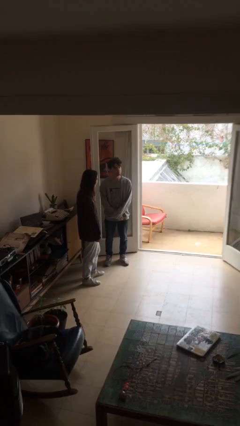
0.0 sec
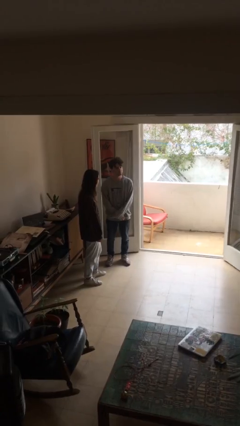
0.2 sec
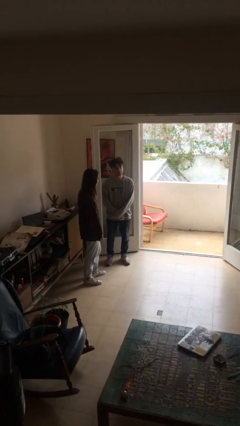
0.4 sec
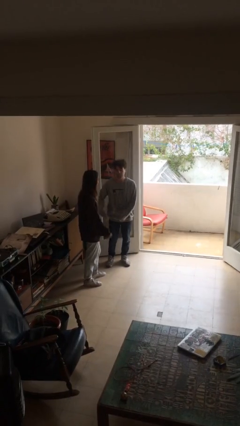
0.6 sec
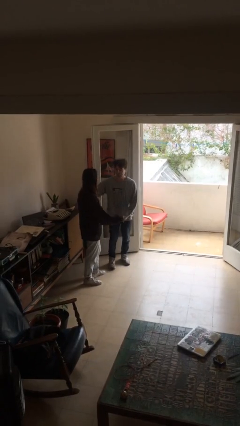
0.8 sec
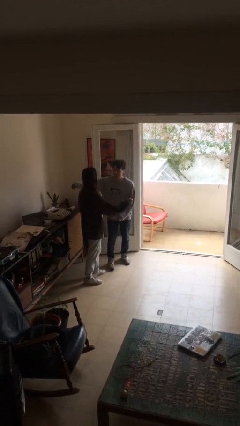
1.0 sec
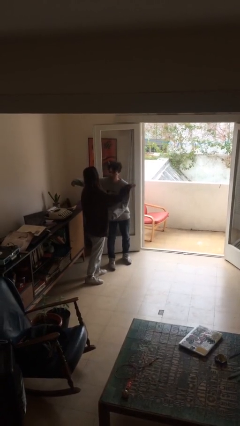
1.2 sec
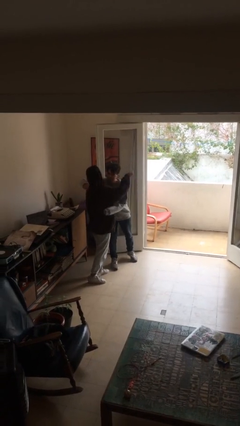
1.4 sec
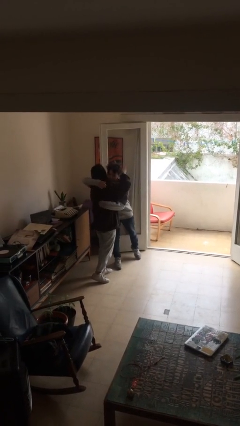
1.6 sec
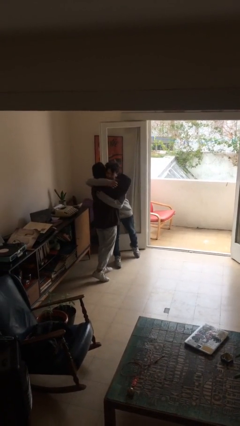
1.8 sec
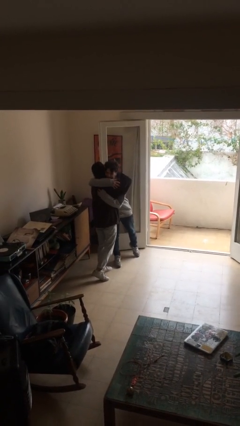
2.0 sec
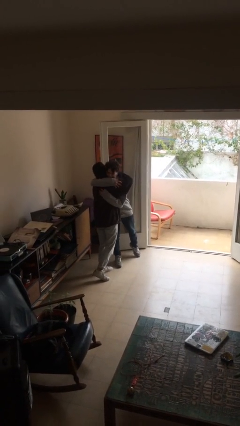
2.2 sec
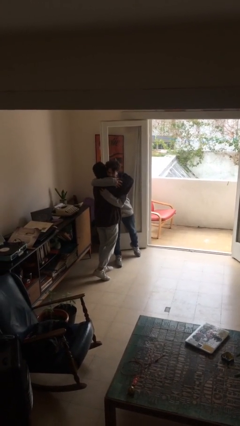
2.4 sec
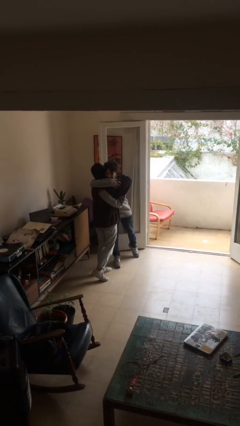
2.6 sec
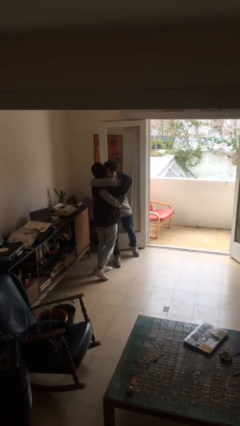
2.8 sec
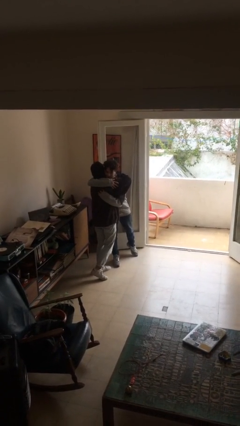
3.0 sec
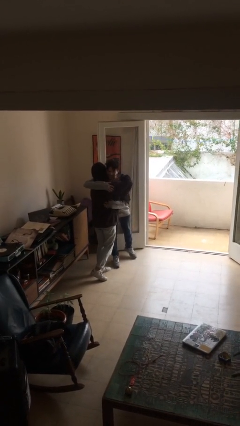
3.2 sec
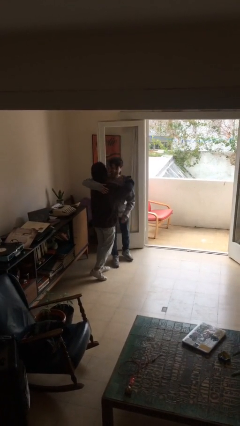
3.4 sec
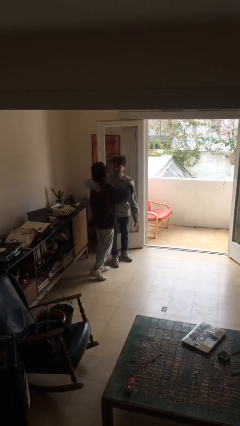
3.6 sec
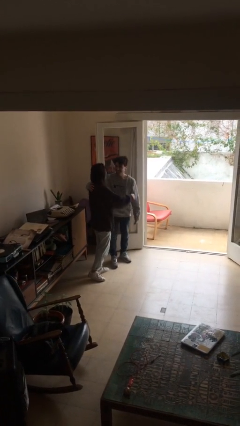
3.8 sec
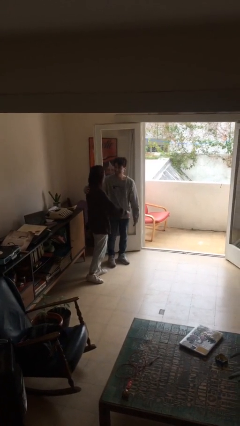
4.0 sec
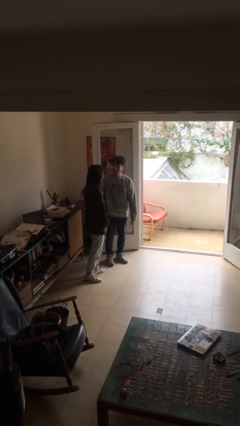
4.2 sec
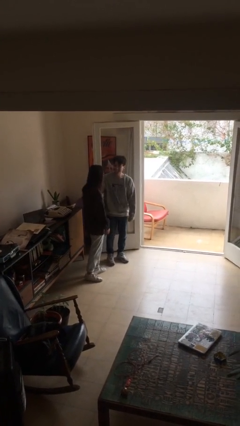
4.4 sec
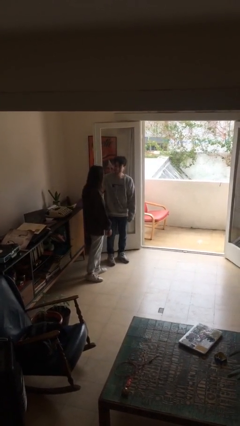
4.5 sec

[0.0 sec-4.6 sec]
person embraces person

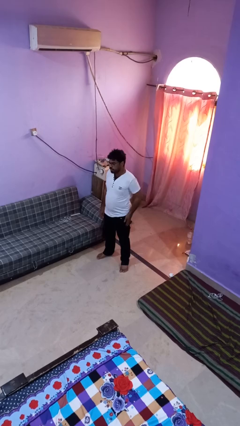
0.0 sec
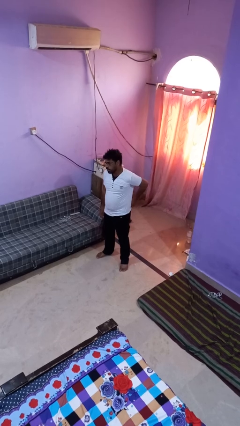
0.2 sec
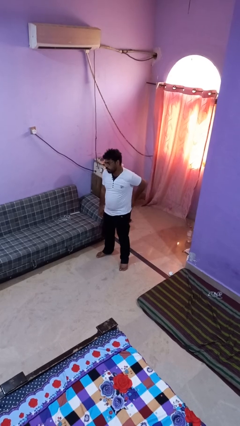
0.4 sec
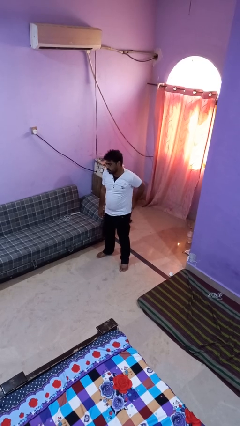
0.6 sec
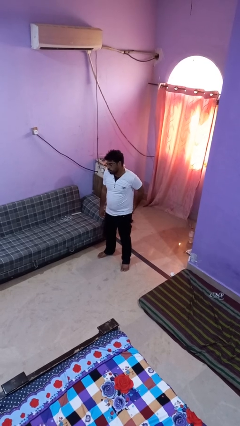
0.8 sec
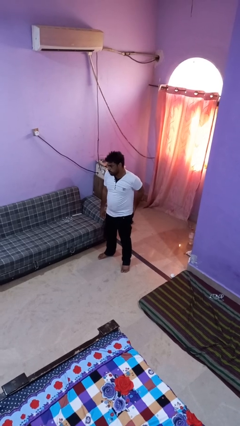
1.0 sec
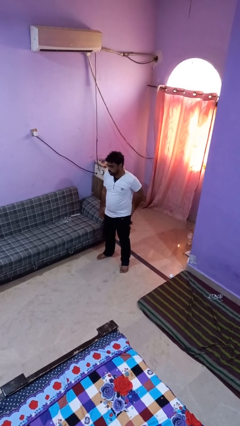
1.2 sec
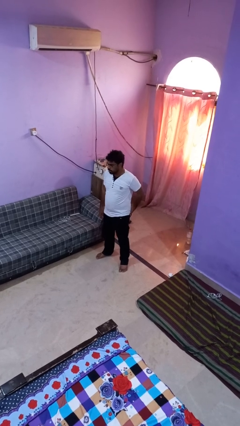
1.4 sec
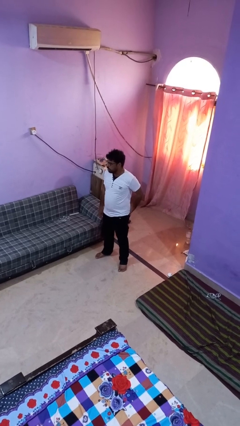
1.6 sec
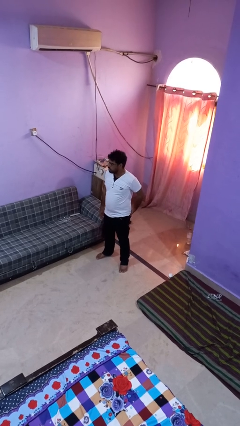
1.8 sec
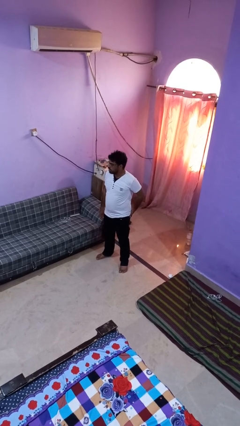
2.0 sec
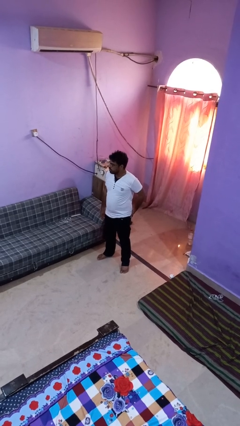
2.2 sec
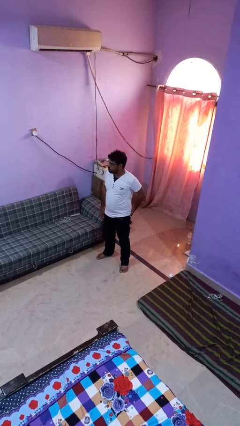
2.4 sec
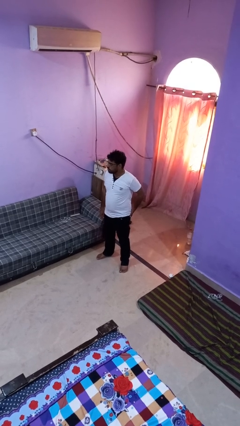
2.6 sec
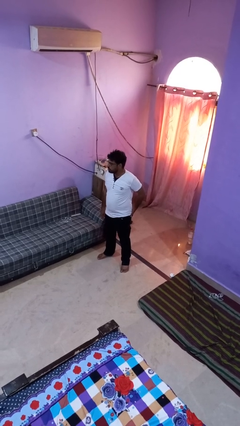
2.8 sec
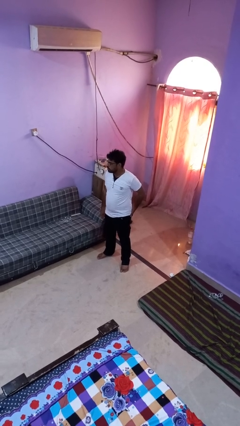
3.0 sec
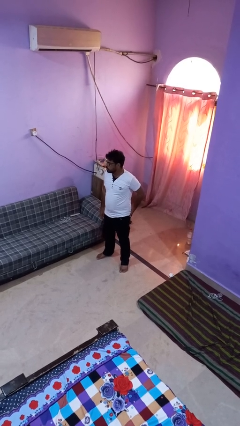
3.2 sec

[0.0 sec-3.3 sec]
person puts hands in back pockets

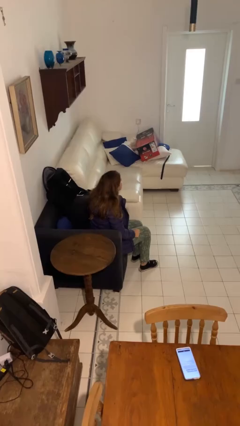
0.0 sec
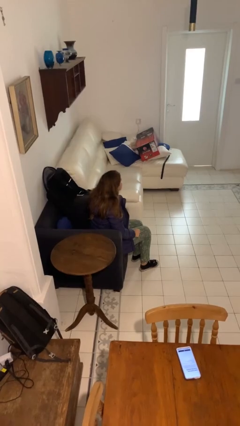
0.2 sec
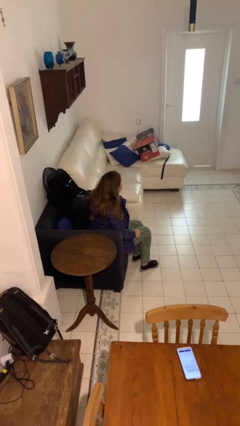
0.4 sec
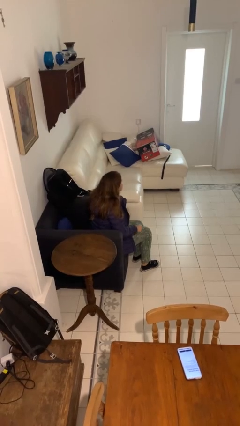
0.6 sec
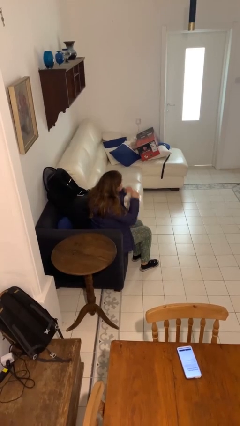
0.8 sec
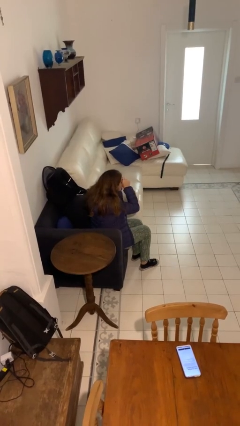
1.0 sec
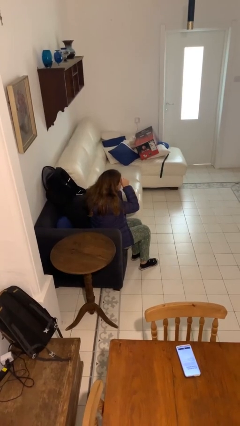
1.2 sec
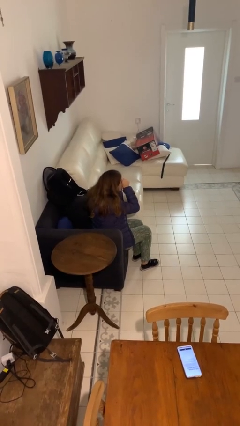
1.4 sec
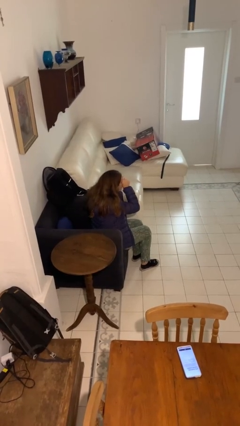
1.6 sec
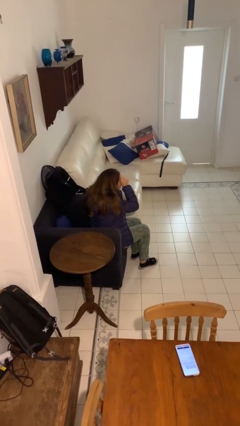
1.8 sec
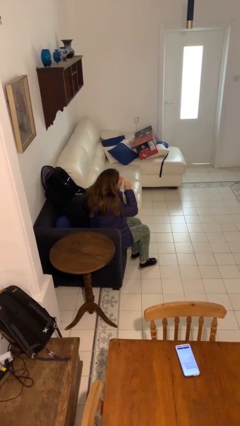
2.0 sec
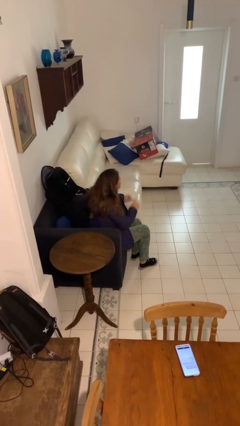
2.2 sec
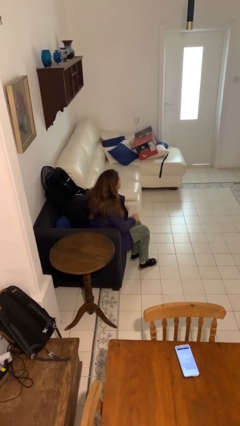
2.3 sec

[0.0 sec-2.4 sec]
person rubs eyes

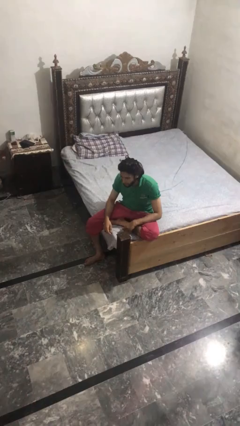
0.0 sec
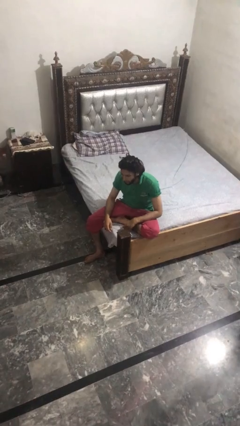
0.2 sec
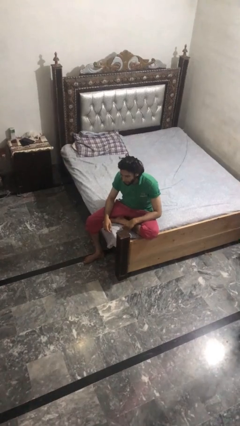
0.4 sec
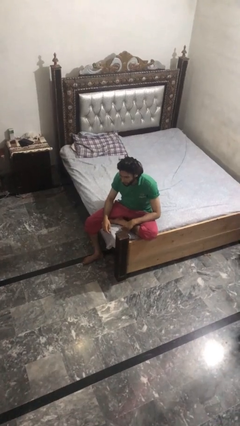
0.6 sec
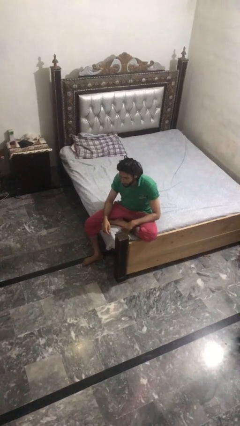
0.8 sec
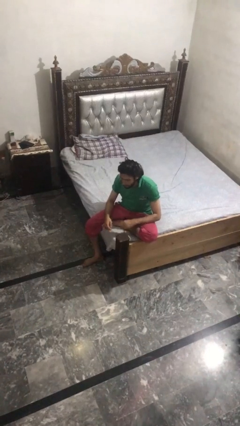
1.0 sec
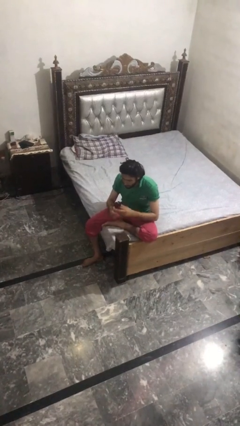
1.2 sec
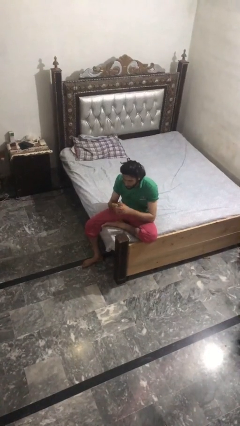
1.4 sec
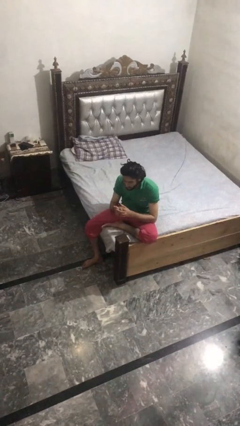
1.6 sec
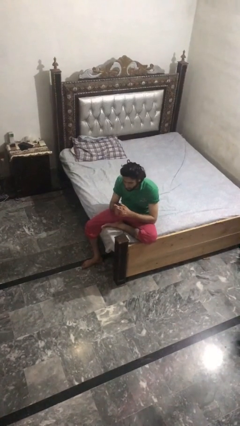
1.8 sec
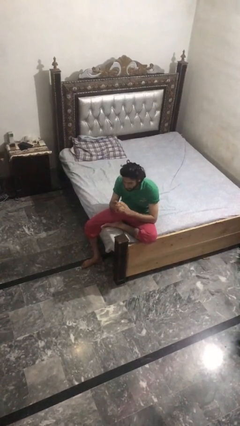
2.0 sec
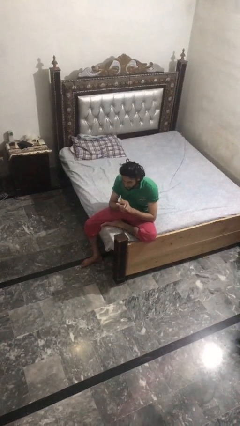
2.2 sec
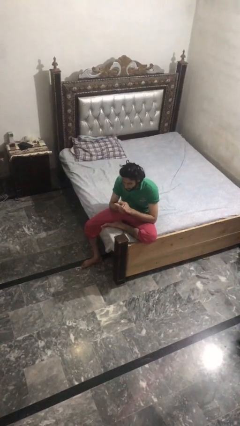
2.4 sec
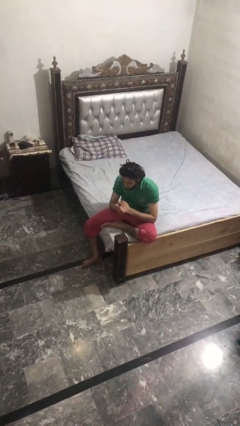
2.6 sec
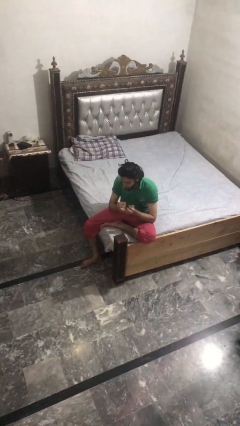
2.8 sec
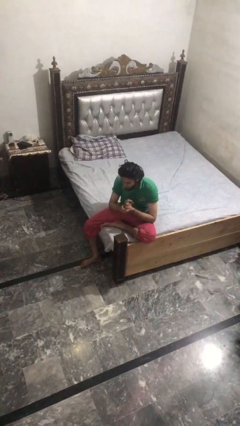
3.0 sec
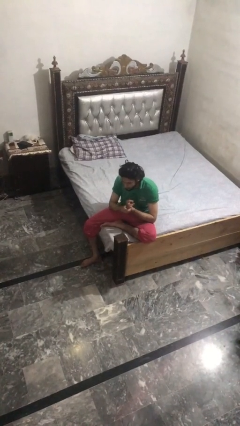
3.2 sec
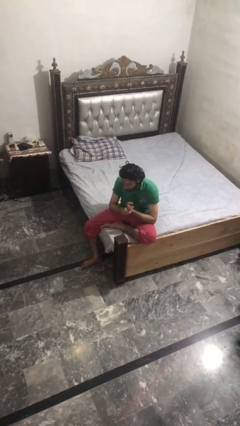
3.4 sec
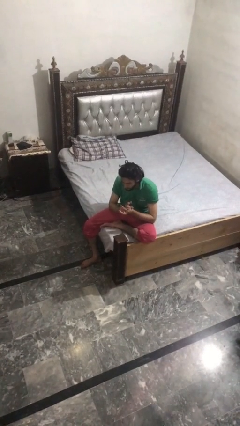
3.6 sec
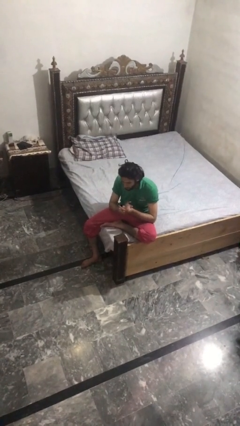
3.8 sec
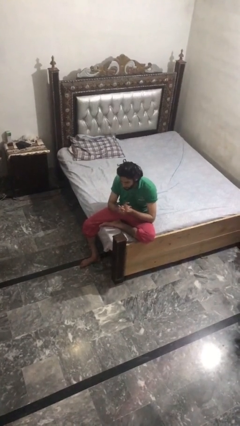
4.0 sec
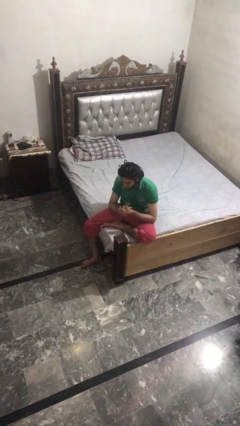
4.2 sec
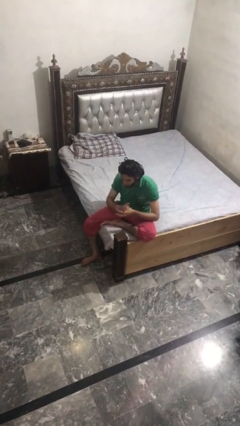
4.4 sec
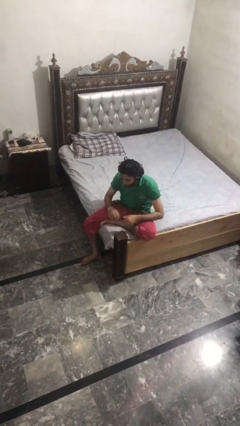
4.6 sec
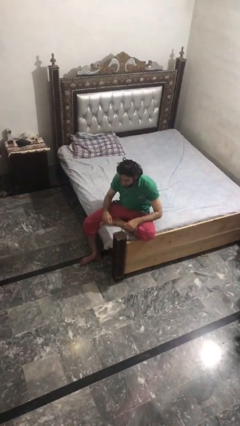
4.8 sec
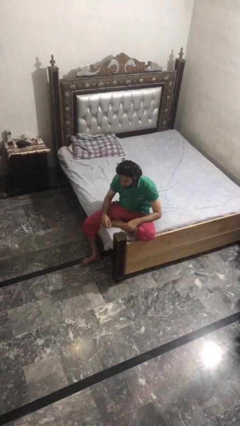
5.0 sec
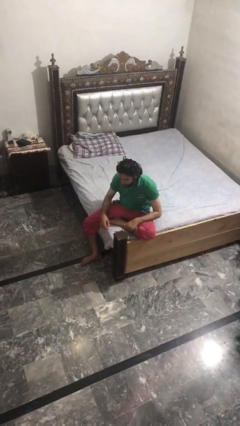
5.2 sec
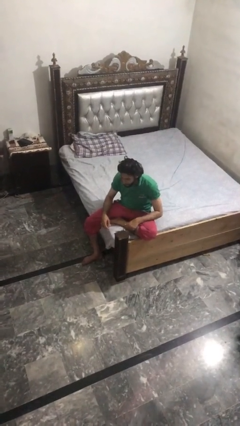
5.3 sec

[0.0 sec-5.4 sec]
person cracks knuckles

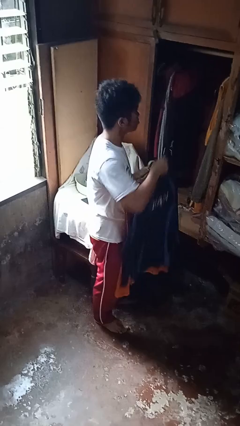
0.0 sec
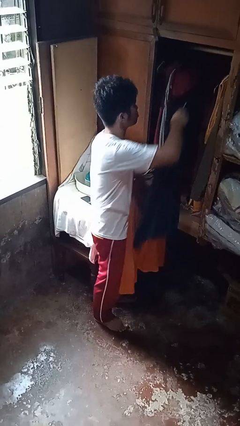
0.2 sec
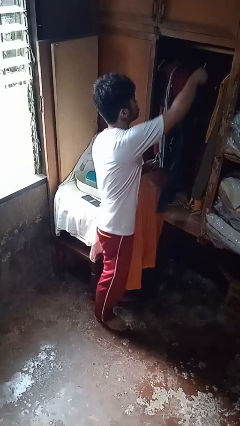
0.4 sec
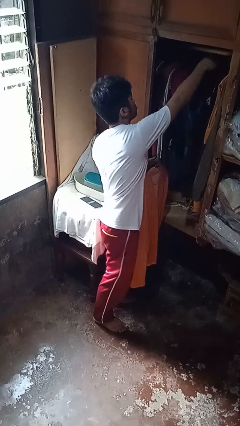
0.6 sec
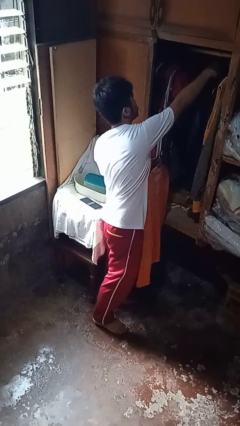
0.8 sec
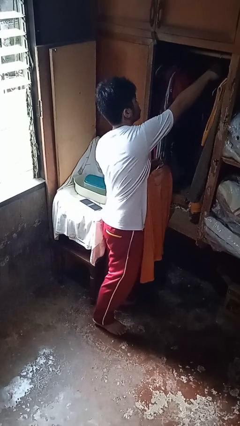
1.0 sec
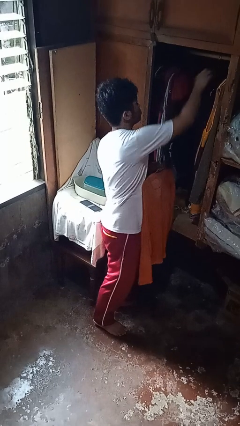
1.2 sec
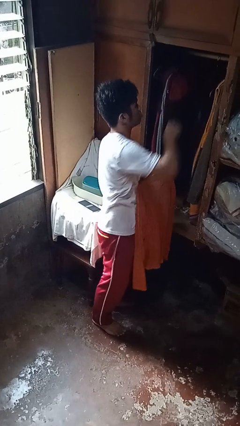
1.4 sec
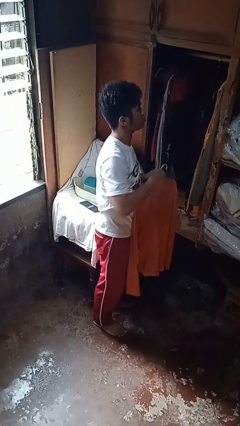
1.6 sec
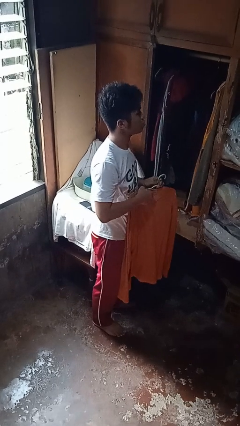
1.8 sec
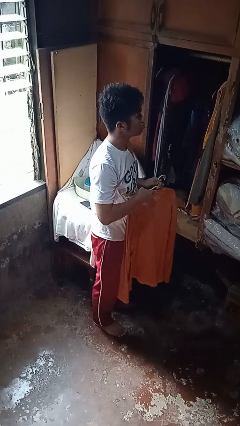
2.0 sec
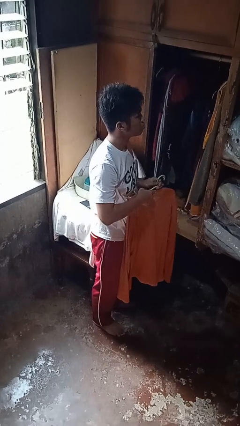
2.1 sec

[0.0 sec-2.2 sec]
person puts clothes into closet

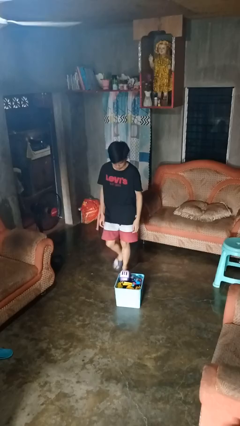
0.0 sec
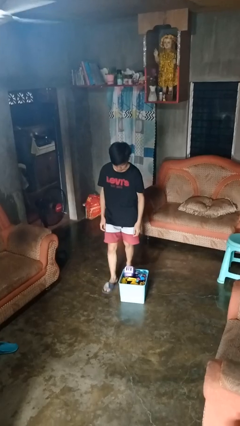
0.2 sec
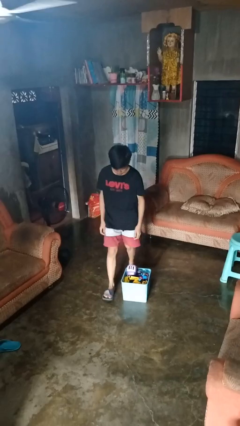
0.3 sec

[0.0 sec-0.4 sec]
person trips on object on floor
